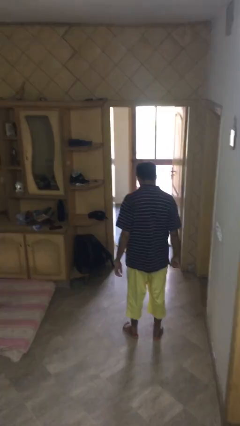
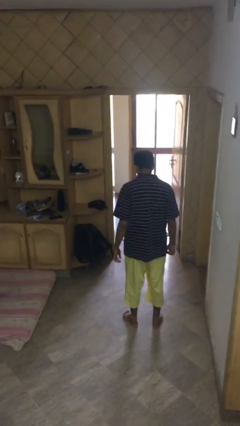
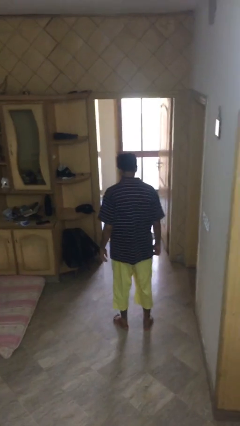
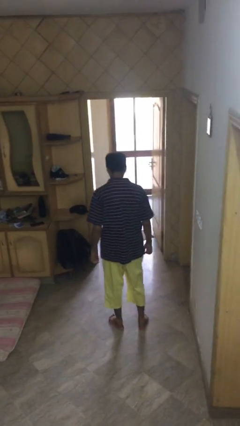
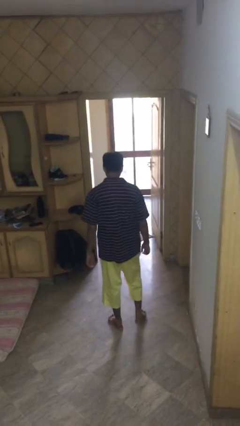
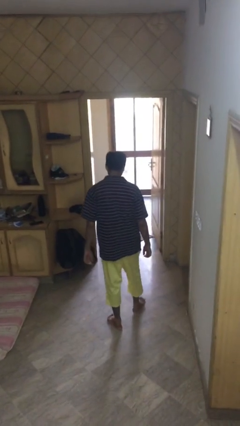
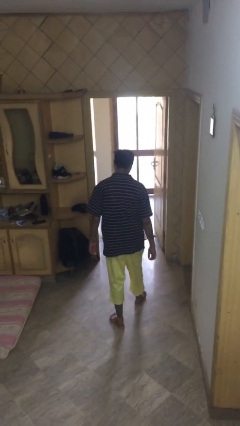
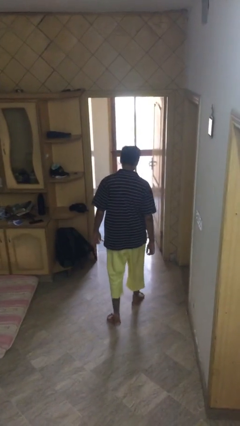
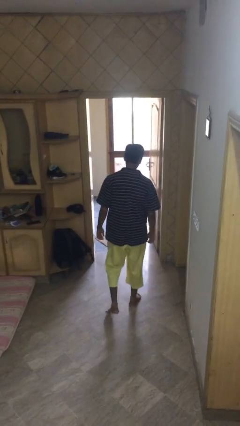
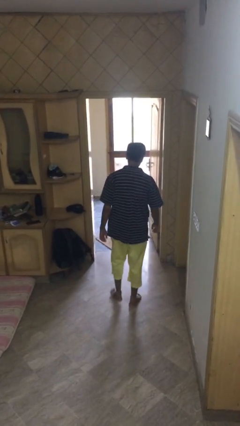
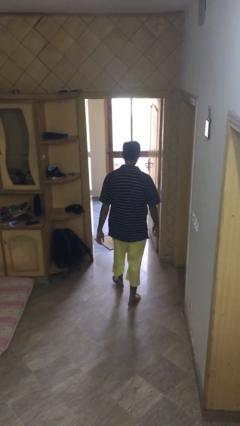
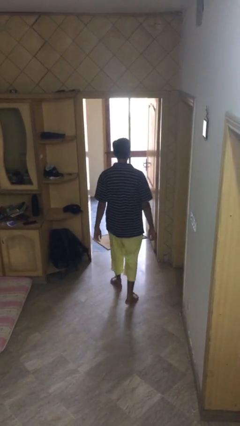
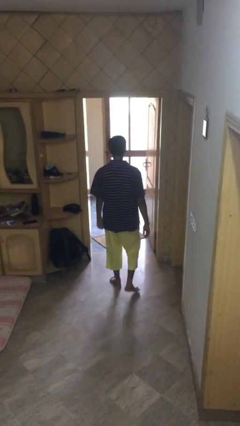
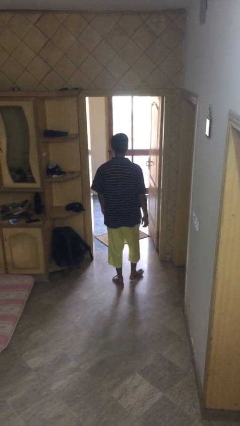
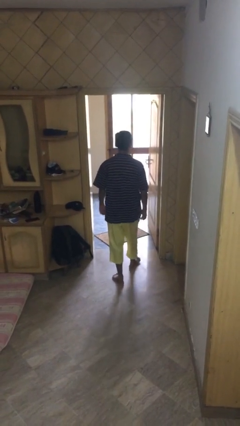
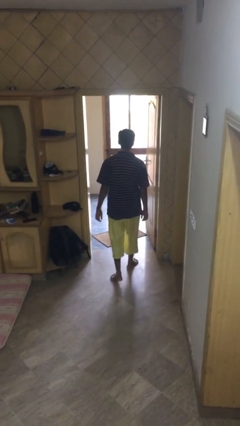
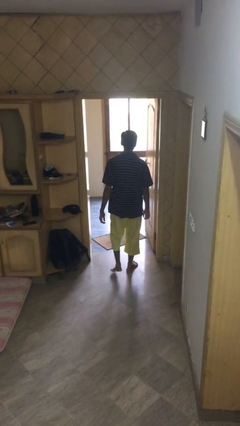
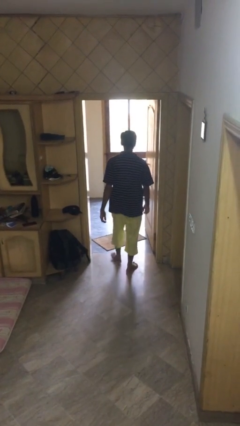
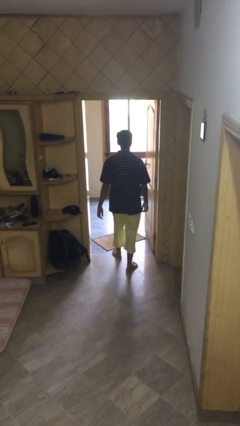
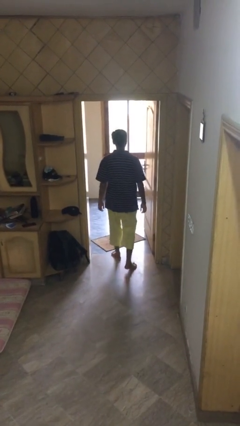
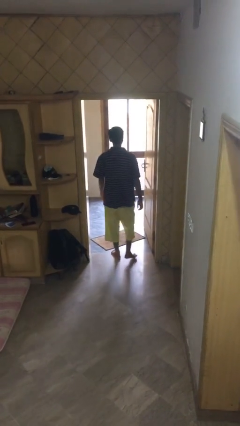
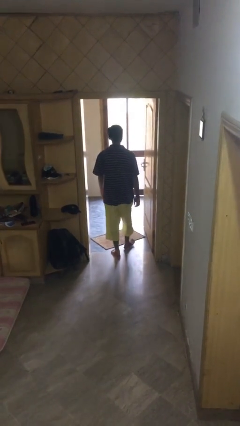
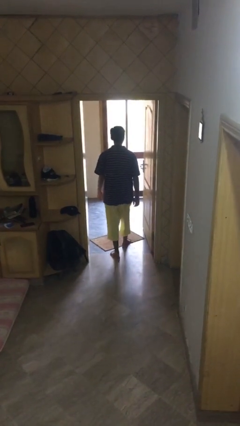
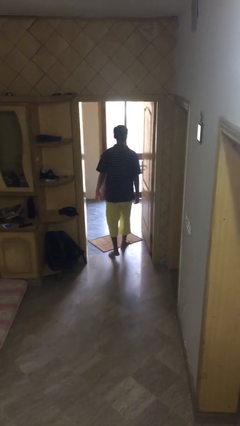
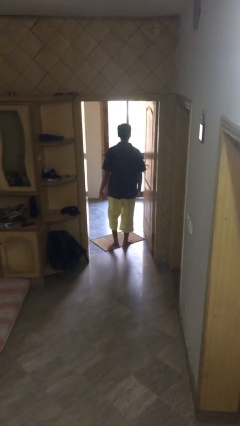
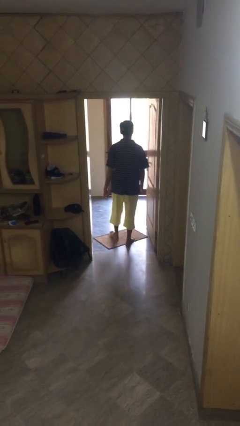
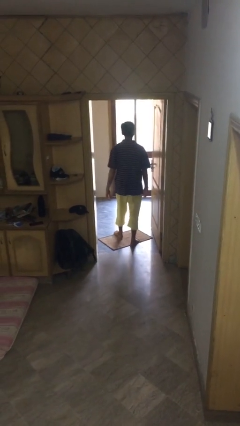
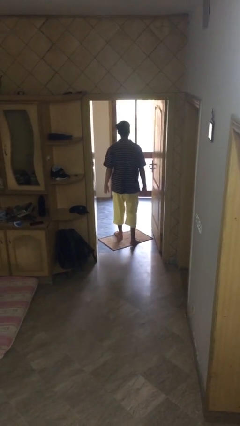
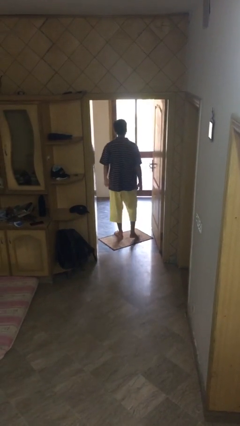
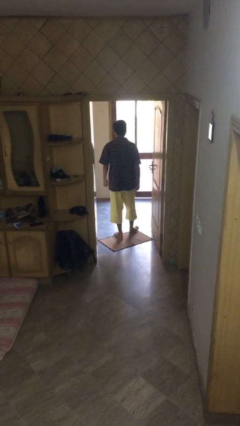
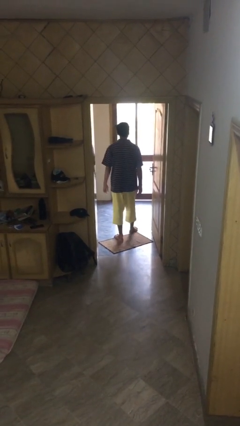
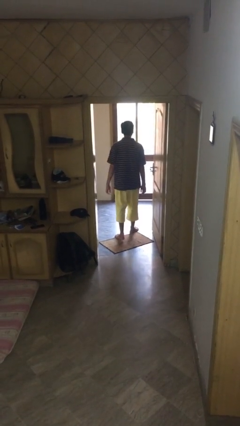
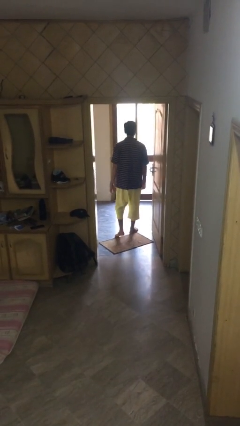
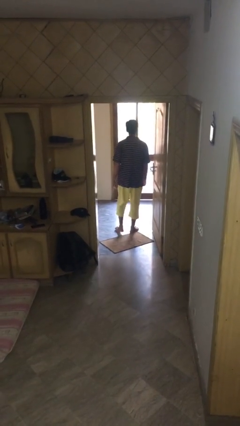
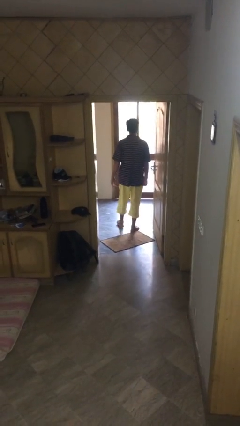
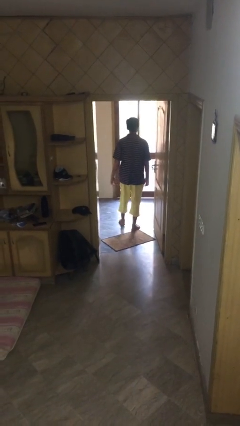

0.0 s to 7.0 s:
person exits scene through structure

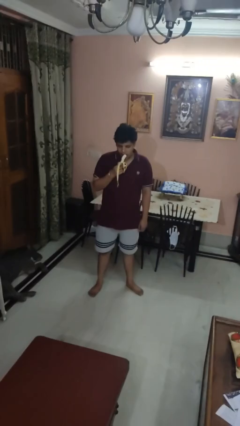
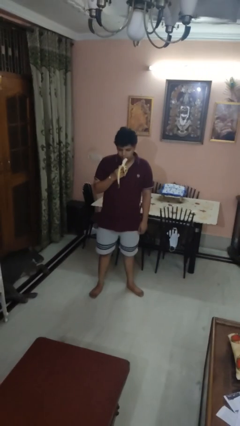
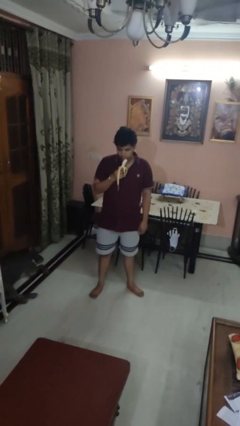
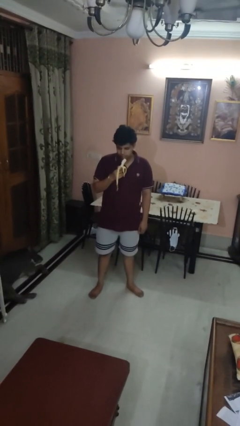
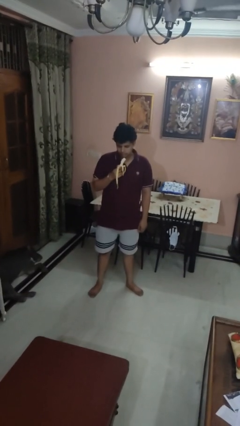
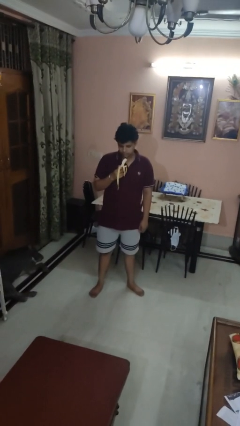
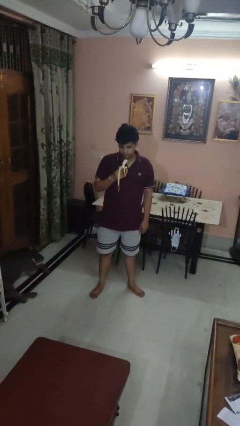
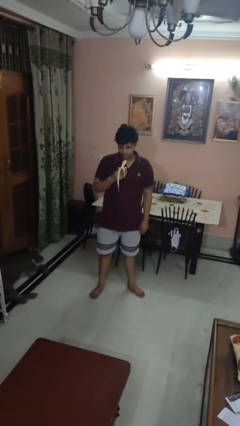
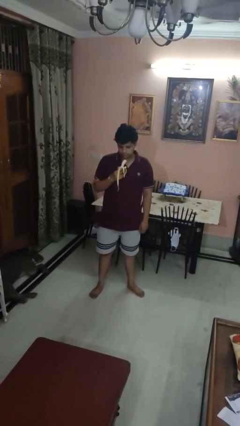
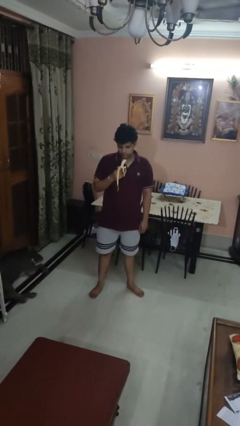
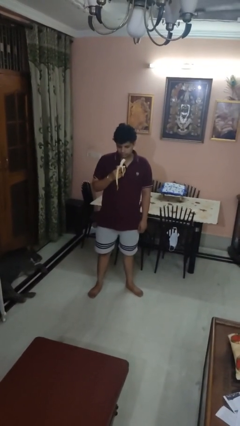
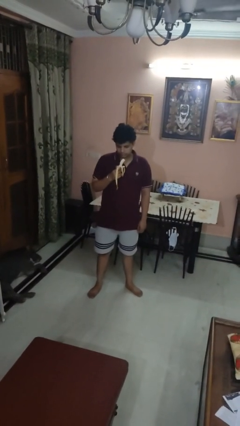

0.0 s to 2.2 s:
person eats banana

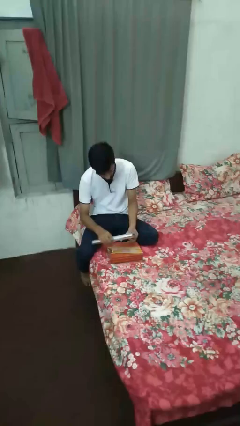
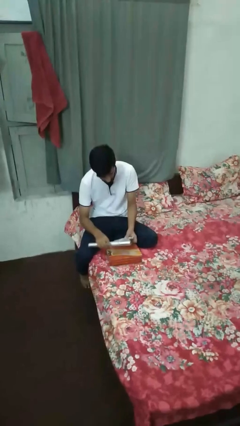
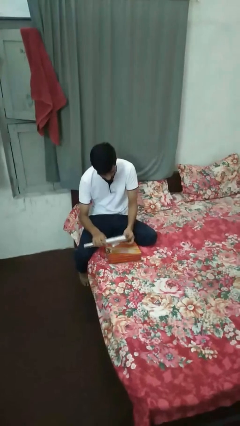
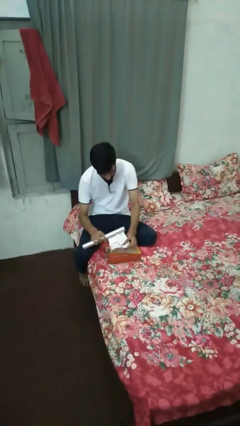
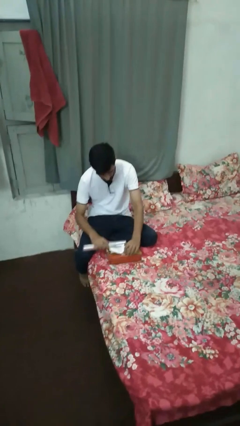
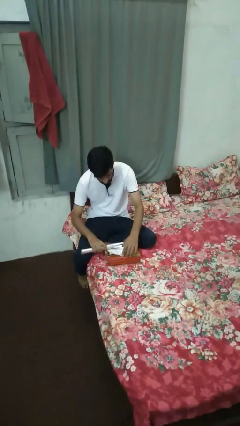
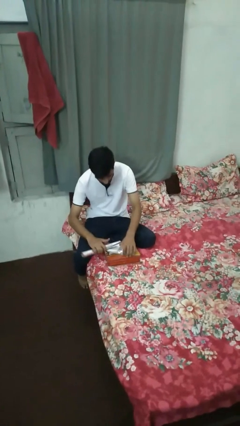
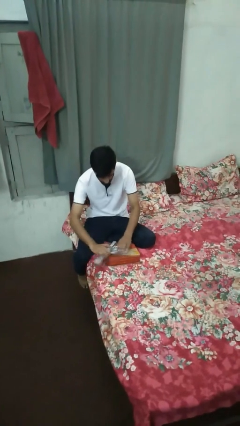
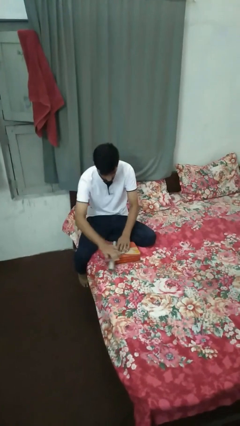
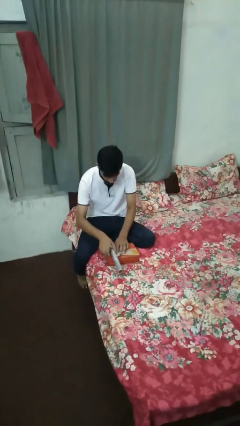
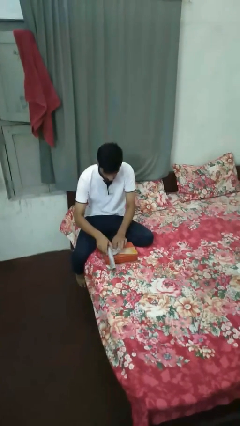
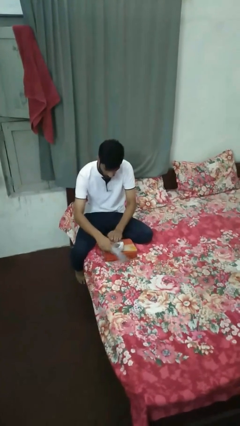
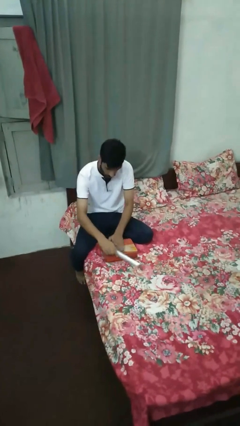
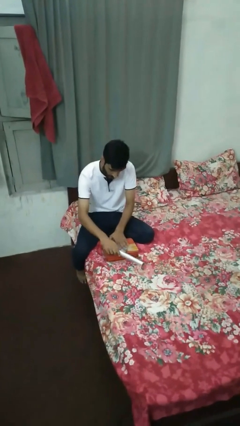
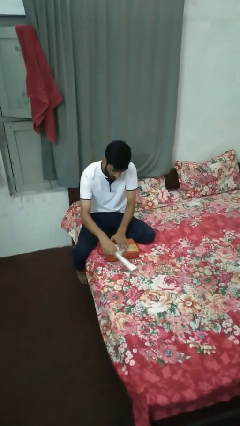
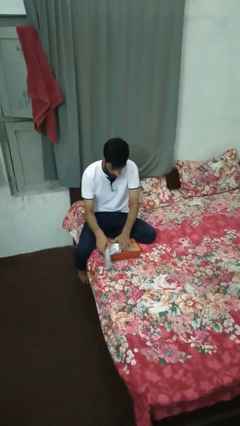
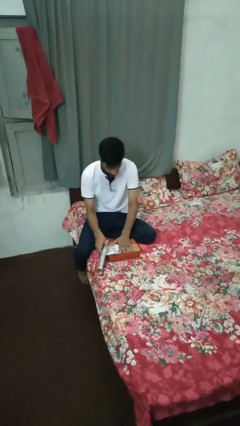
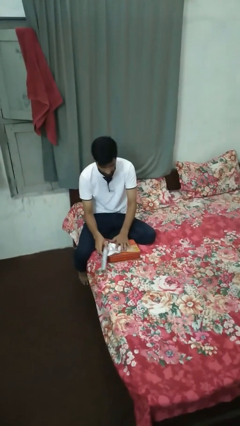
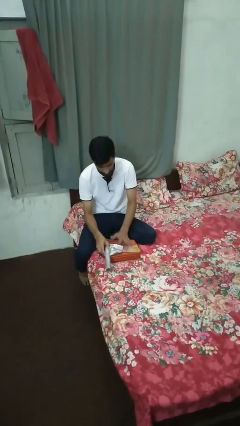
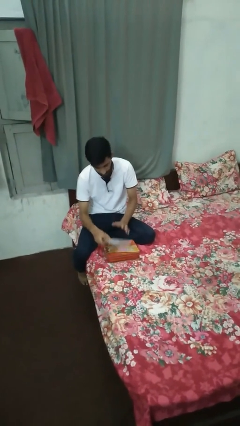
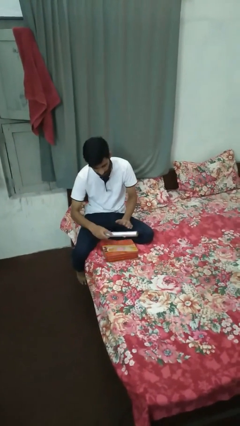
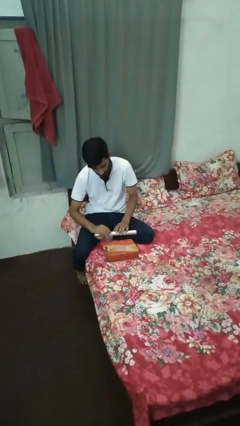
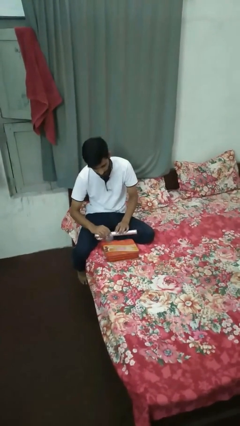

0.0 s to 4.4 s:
person wraps box

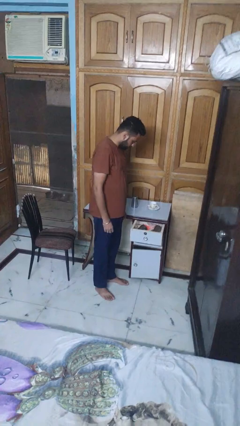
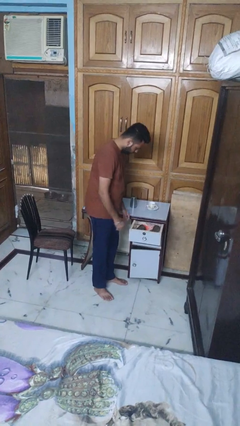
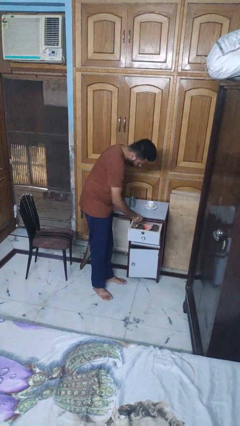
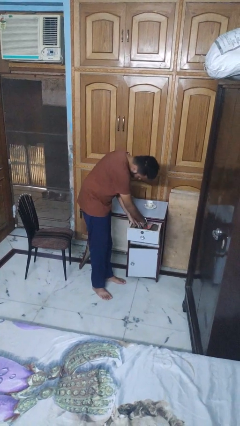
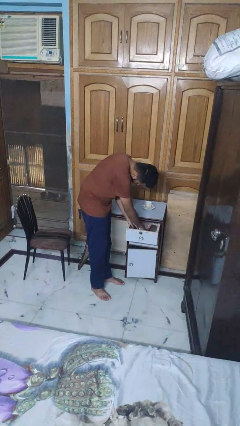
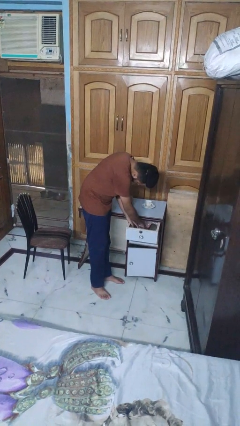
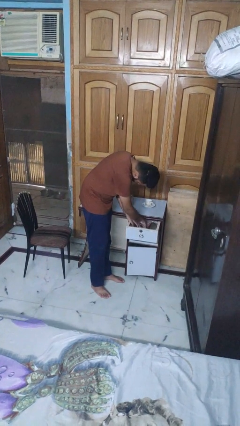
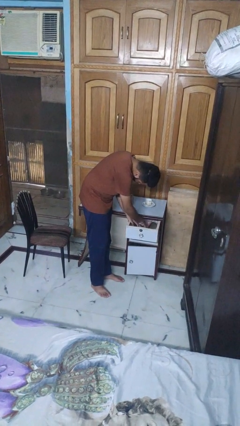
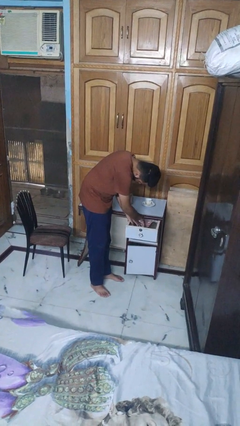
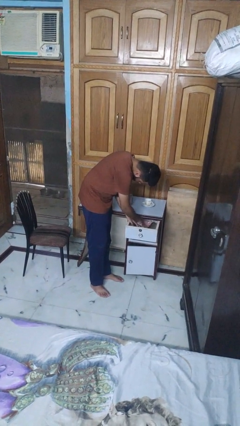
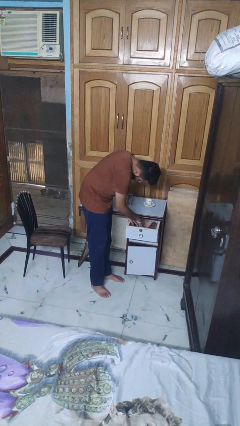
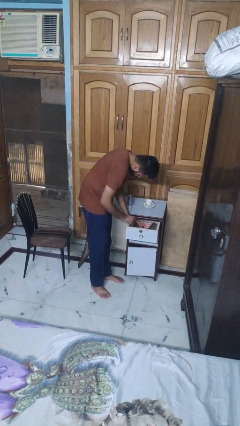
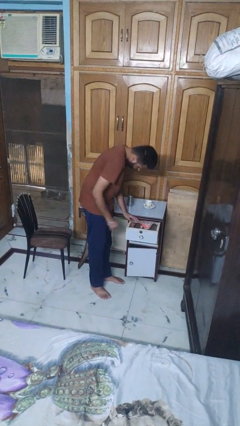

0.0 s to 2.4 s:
person searches in kitchen drawer

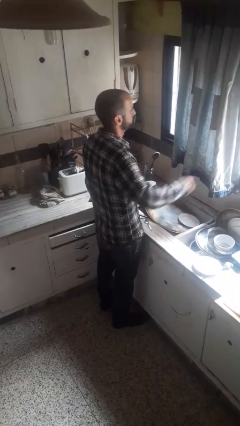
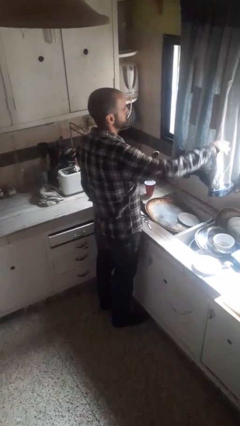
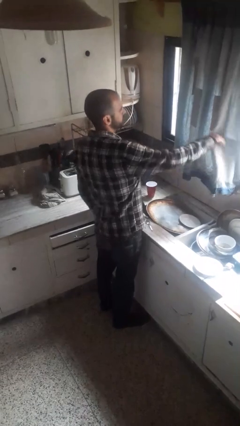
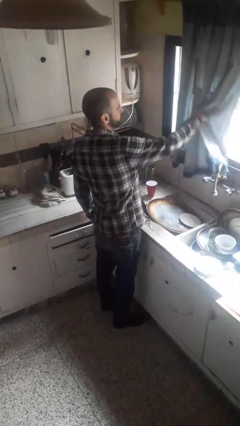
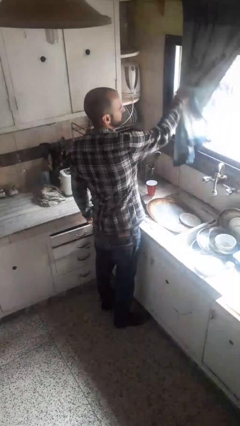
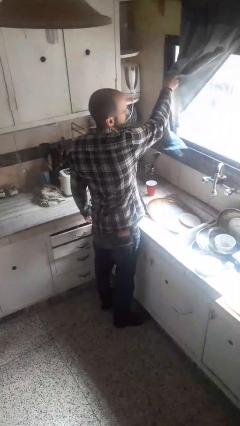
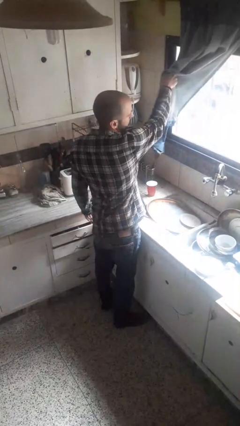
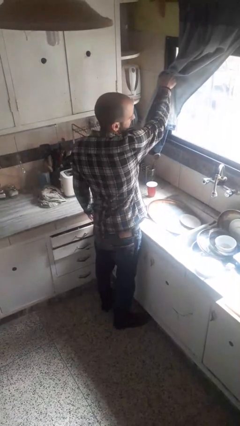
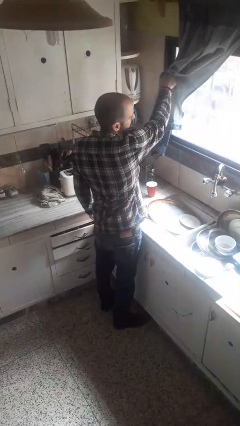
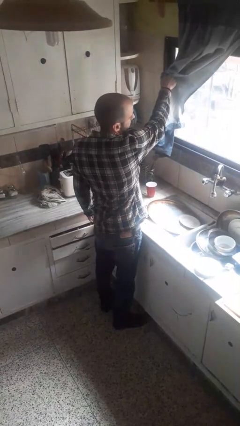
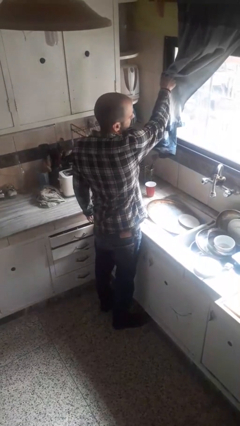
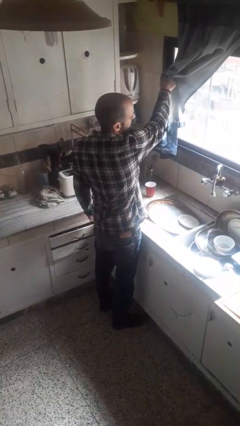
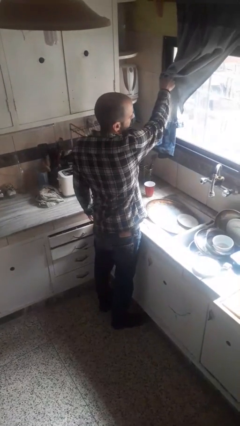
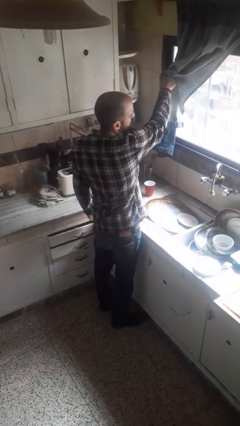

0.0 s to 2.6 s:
person opens curtains
